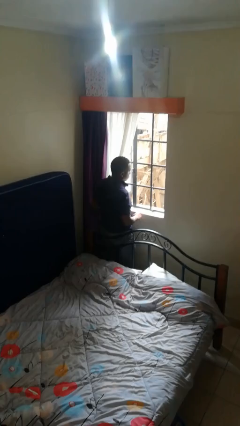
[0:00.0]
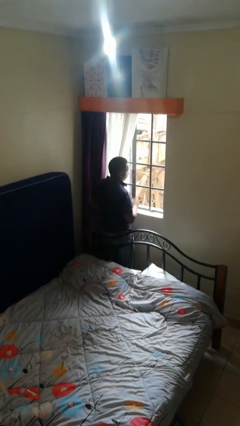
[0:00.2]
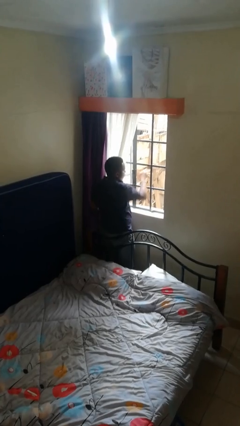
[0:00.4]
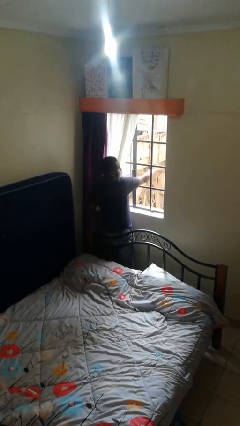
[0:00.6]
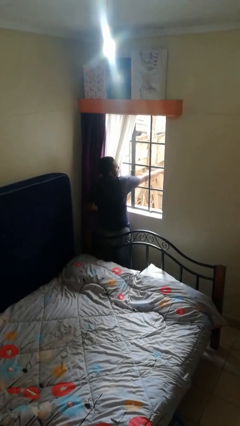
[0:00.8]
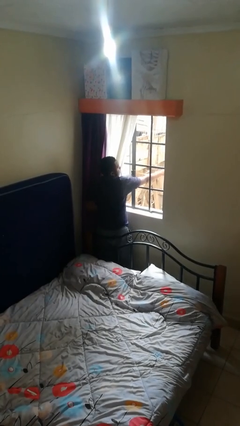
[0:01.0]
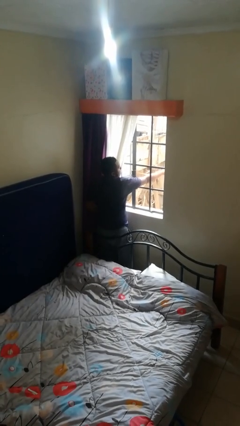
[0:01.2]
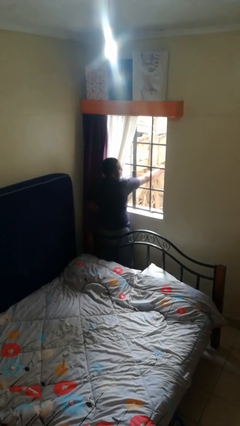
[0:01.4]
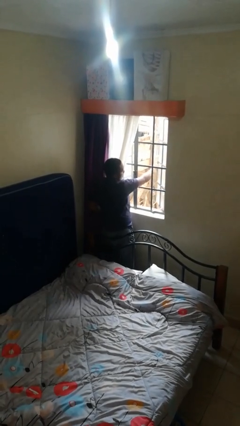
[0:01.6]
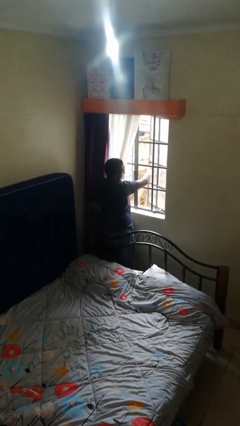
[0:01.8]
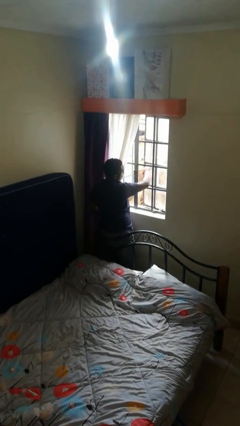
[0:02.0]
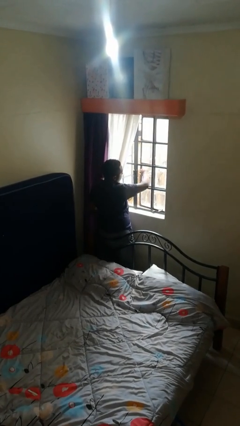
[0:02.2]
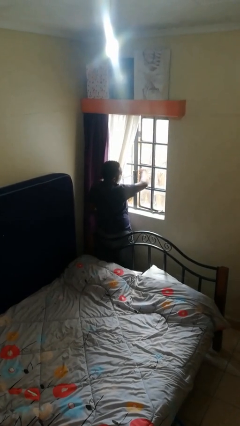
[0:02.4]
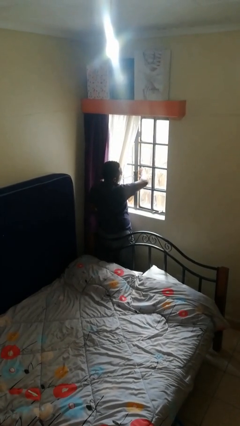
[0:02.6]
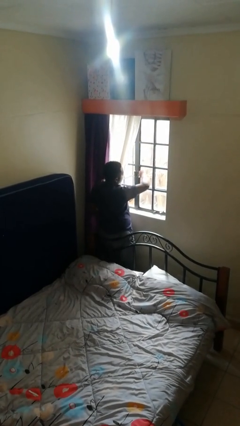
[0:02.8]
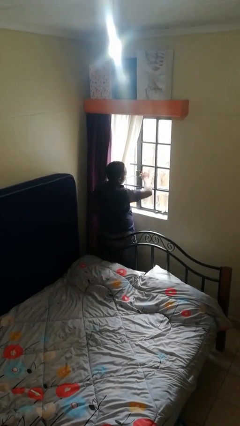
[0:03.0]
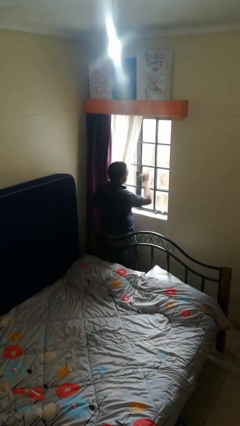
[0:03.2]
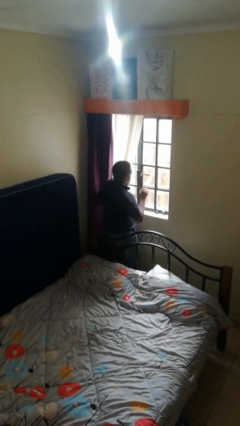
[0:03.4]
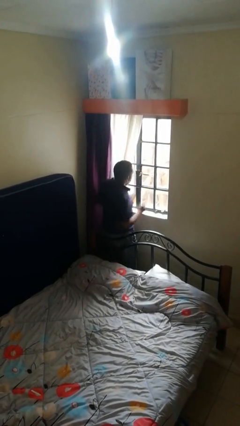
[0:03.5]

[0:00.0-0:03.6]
person closes home window

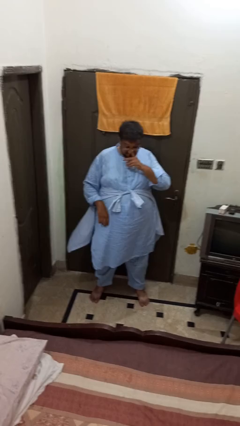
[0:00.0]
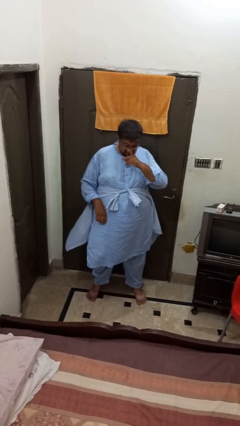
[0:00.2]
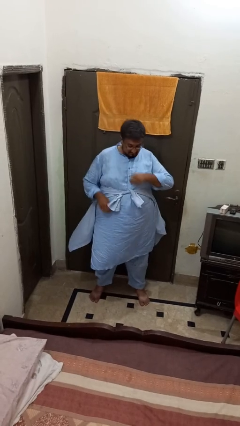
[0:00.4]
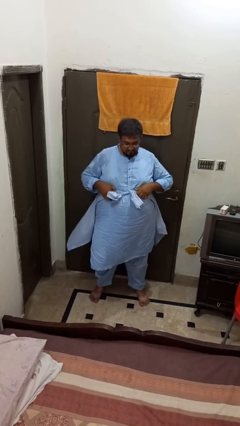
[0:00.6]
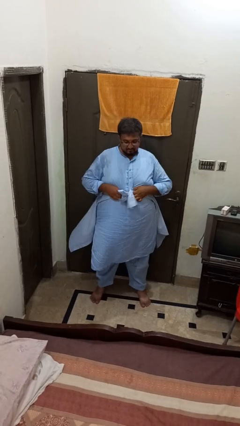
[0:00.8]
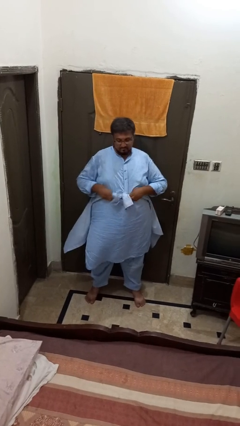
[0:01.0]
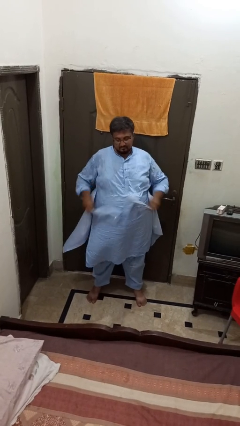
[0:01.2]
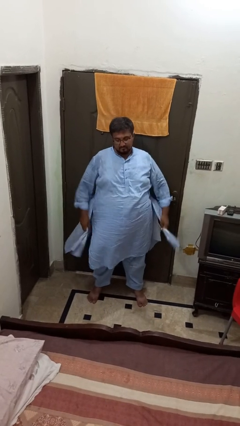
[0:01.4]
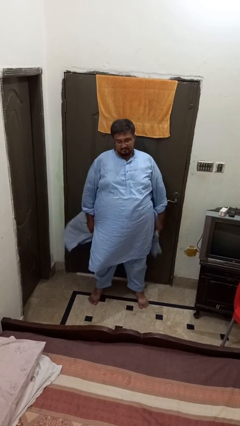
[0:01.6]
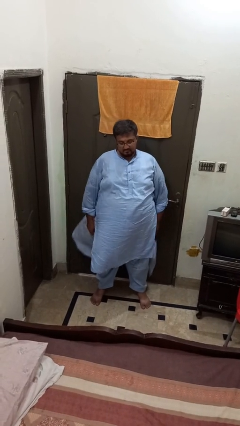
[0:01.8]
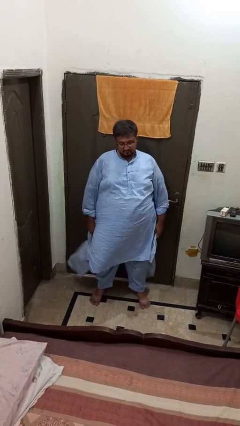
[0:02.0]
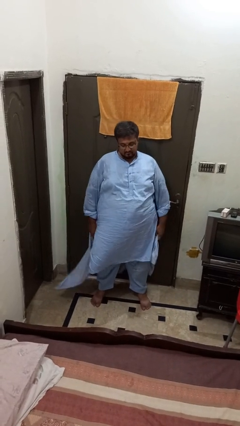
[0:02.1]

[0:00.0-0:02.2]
person unties jacket around waist

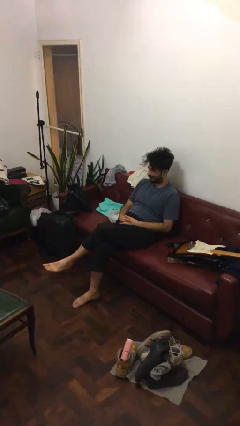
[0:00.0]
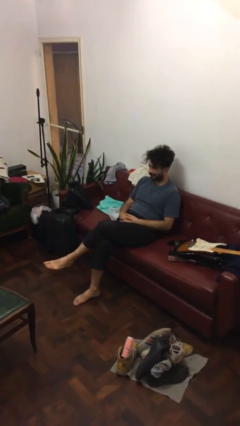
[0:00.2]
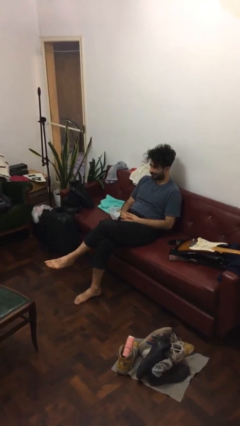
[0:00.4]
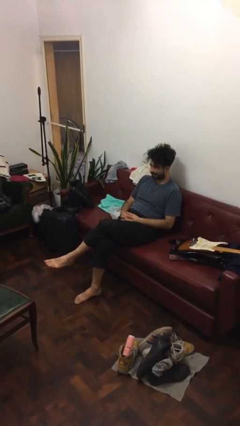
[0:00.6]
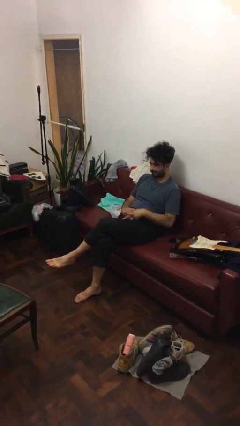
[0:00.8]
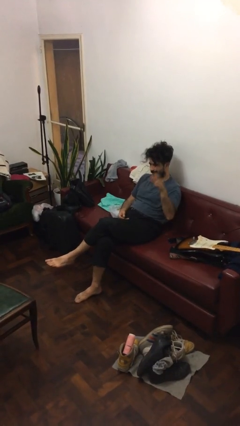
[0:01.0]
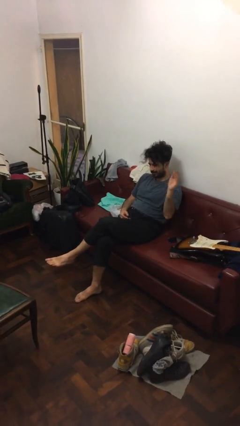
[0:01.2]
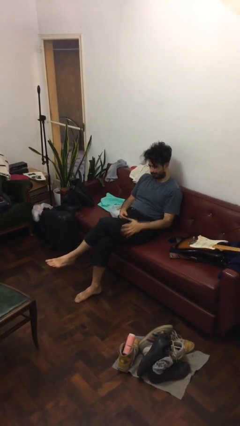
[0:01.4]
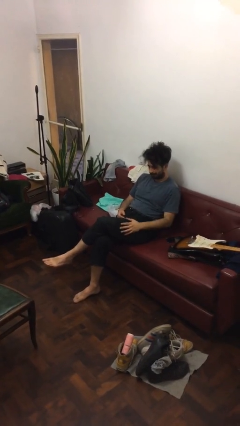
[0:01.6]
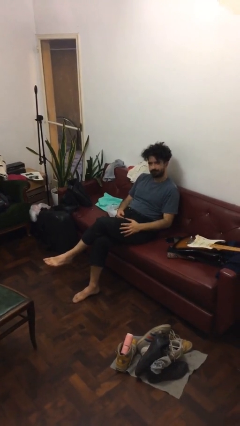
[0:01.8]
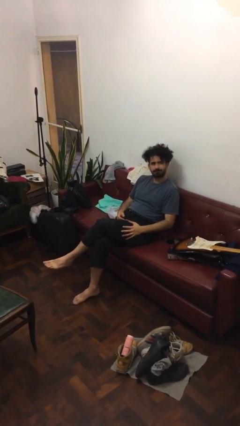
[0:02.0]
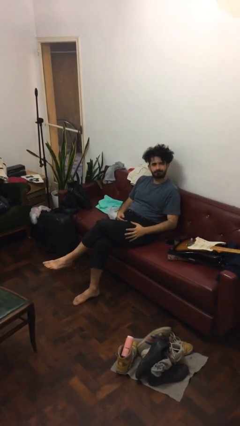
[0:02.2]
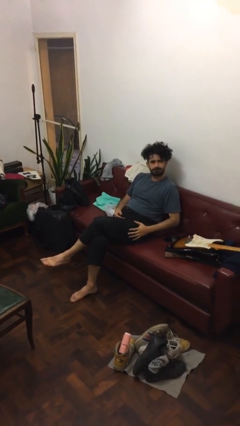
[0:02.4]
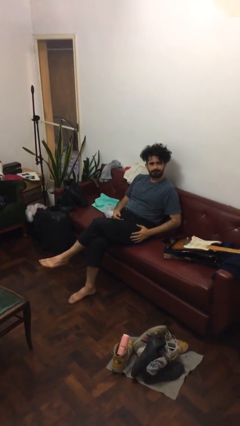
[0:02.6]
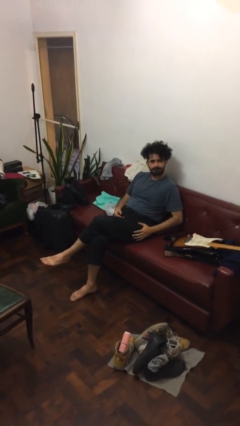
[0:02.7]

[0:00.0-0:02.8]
person slaps hands on thighs

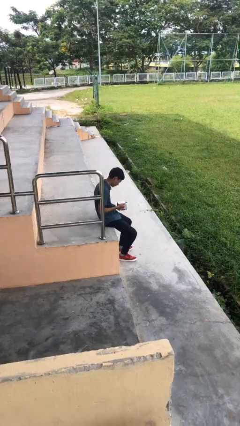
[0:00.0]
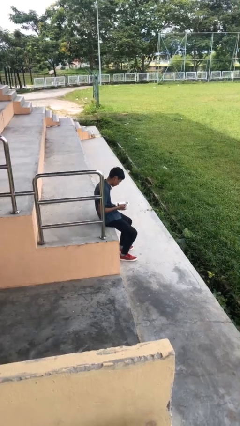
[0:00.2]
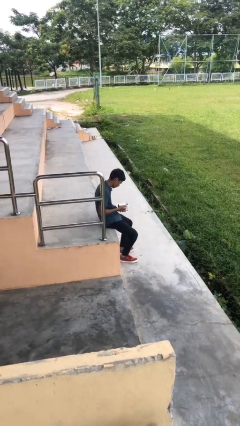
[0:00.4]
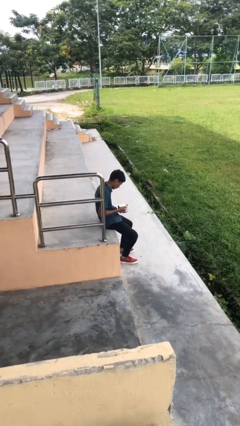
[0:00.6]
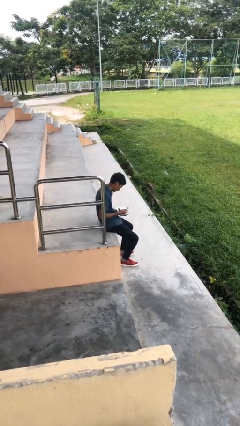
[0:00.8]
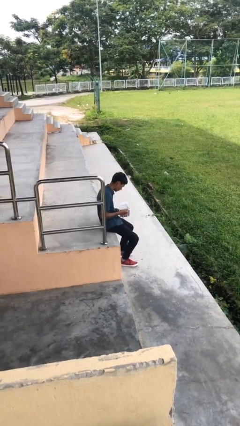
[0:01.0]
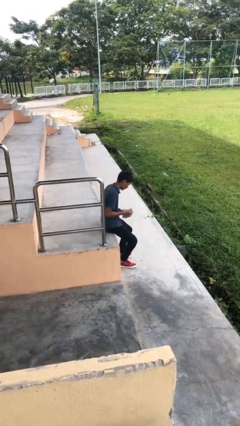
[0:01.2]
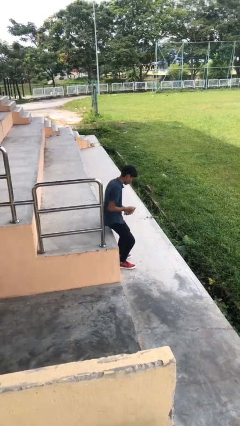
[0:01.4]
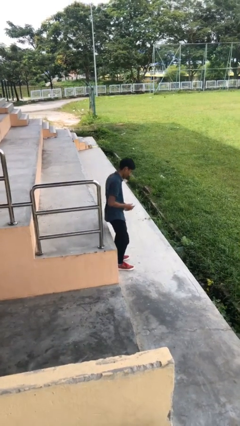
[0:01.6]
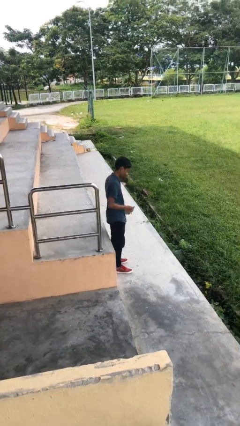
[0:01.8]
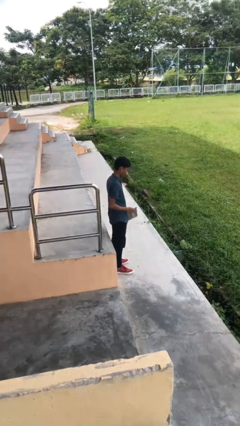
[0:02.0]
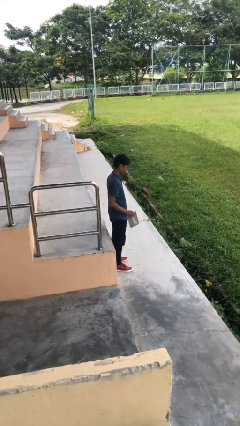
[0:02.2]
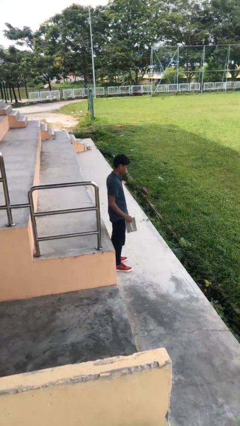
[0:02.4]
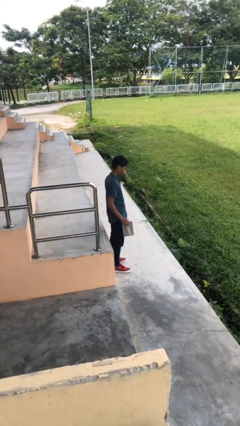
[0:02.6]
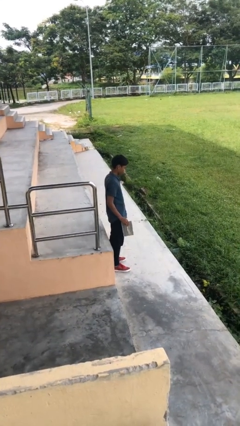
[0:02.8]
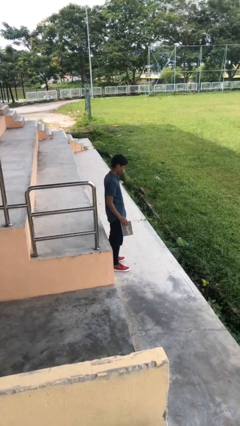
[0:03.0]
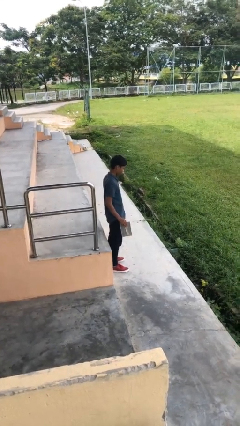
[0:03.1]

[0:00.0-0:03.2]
person stands up

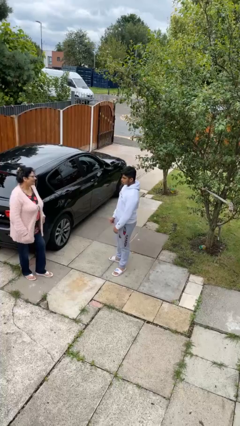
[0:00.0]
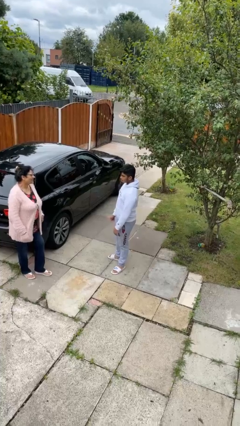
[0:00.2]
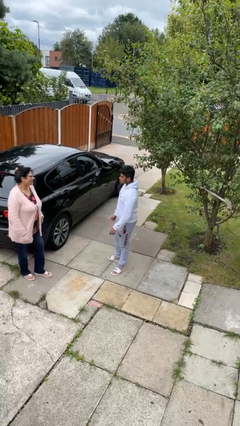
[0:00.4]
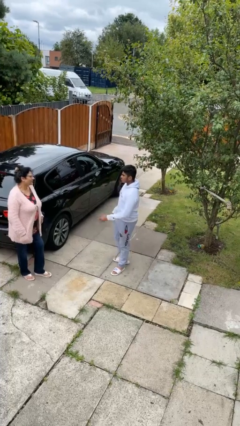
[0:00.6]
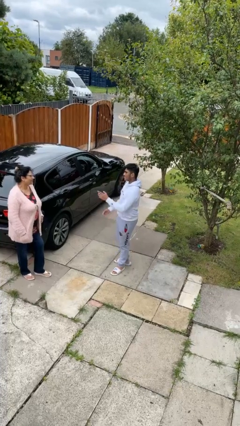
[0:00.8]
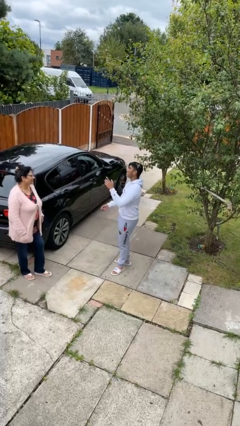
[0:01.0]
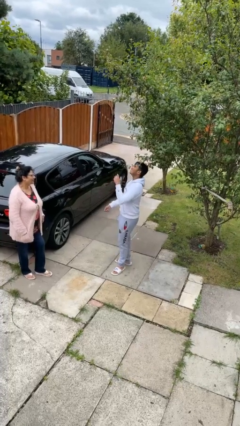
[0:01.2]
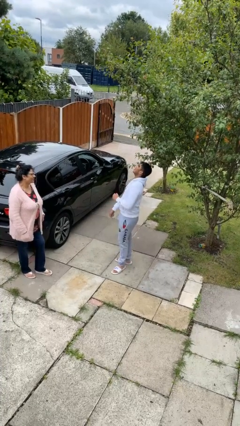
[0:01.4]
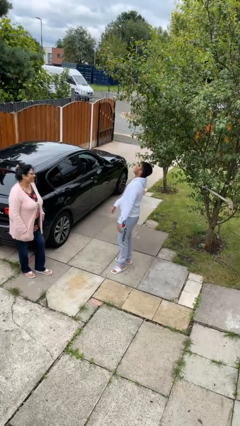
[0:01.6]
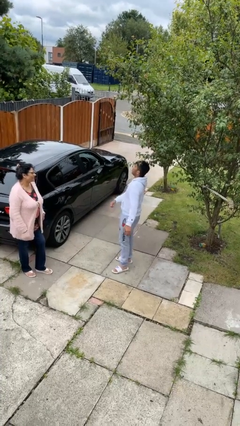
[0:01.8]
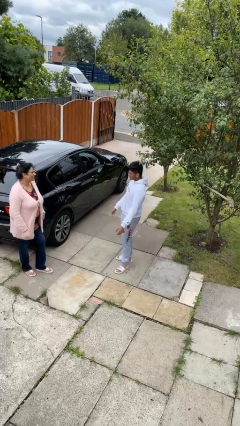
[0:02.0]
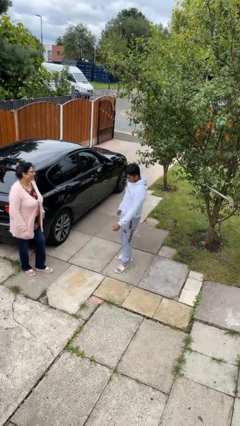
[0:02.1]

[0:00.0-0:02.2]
person laughs with person

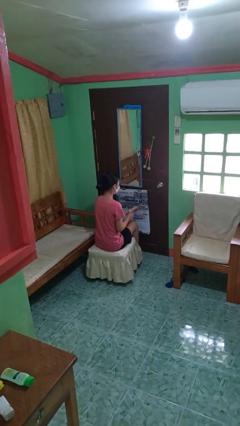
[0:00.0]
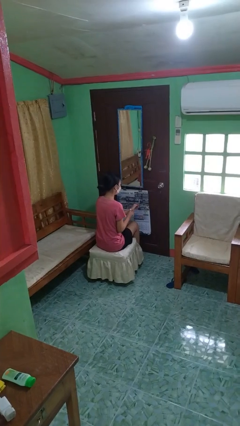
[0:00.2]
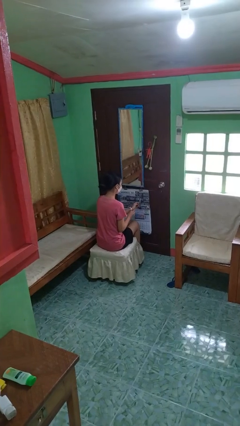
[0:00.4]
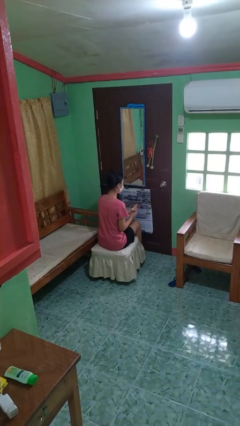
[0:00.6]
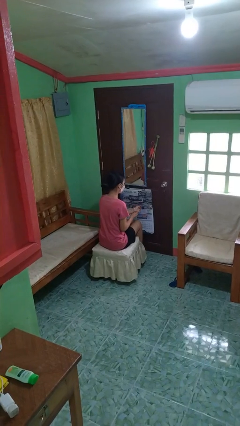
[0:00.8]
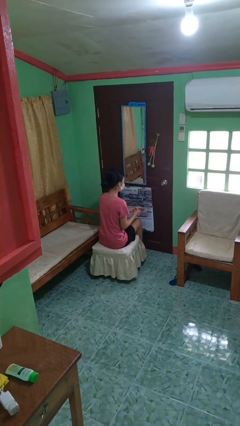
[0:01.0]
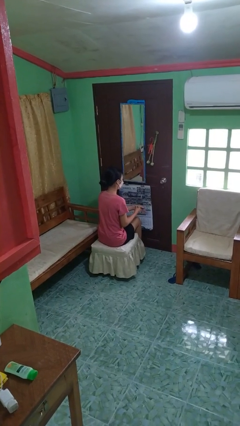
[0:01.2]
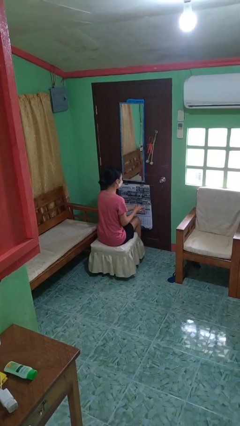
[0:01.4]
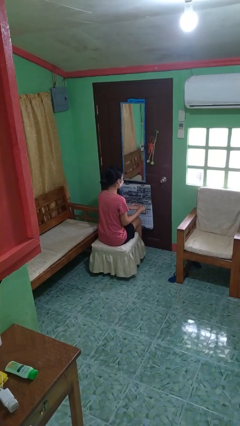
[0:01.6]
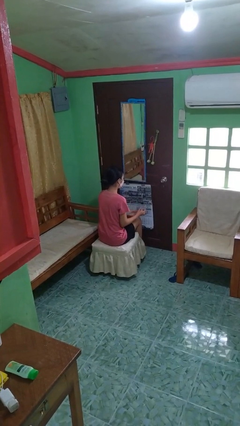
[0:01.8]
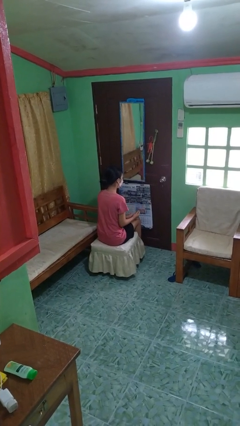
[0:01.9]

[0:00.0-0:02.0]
person takes off wristwatch

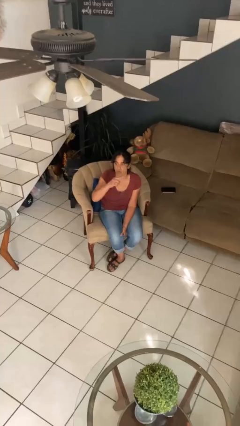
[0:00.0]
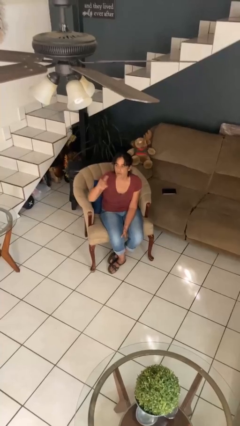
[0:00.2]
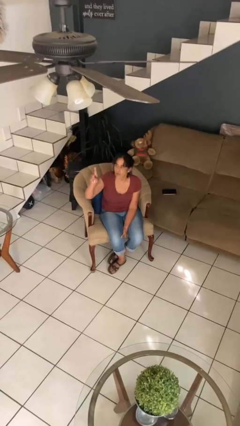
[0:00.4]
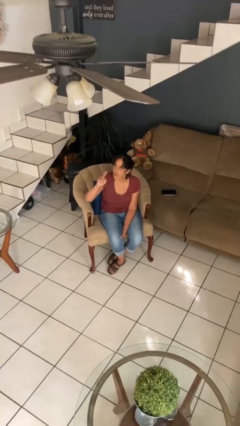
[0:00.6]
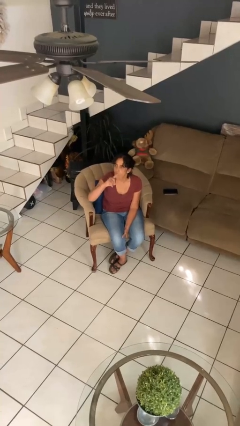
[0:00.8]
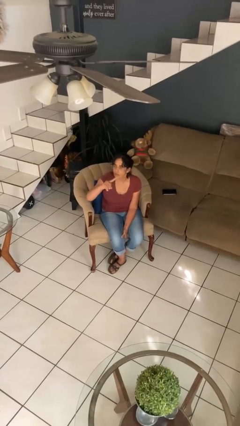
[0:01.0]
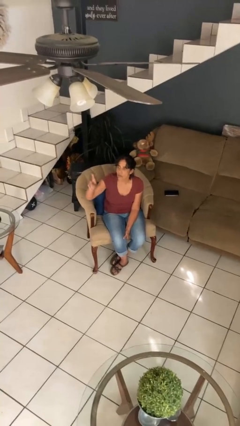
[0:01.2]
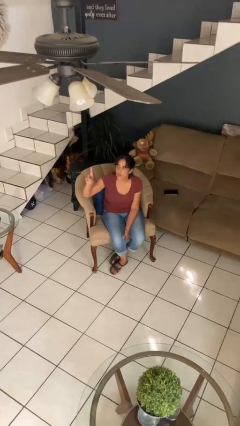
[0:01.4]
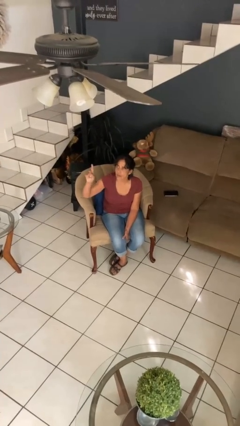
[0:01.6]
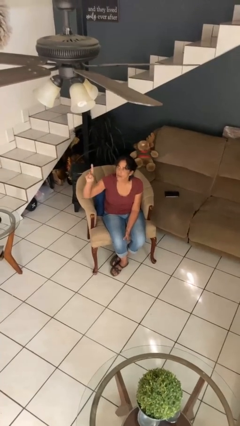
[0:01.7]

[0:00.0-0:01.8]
person gestures swipe left
